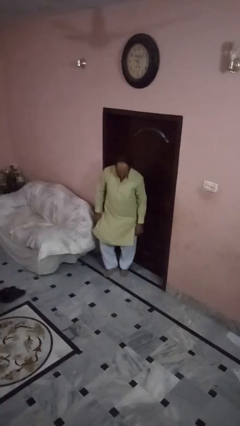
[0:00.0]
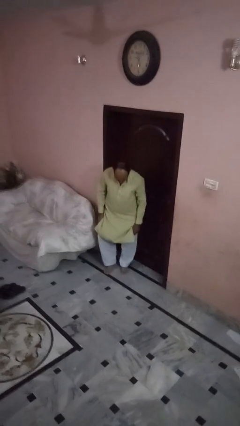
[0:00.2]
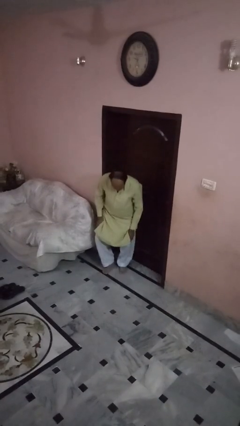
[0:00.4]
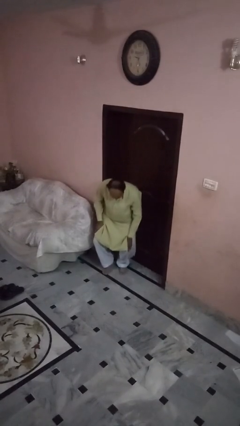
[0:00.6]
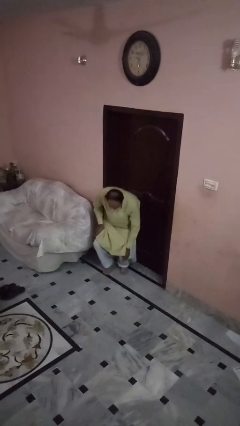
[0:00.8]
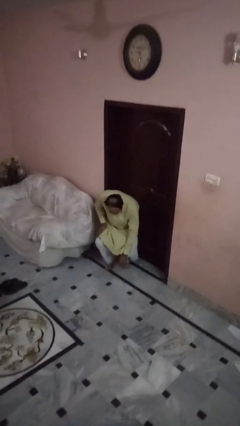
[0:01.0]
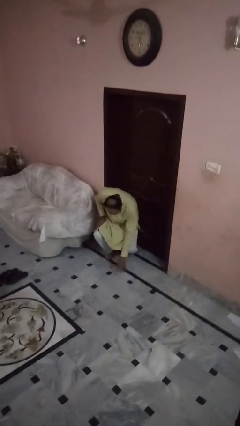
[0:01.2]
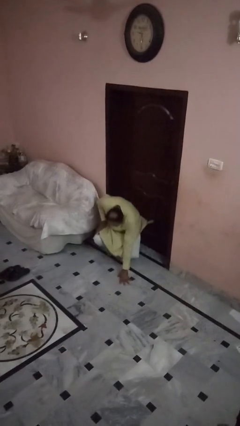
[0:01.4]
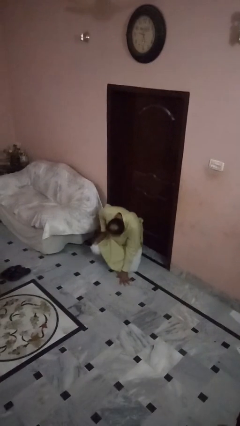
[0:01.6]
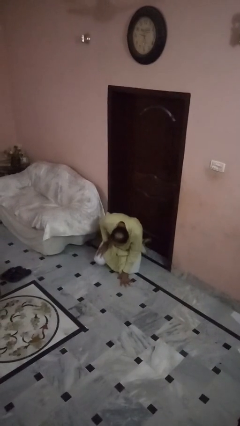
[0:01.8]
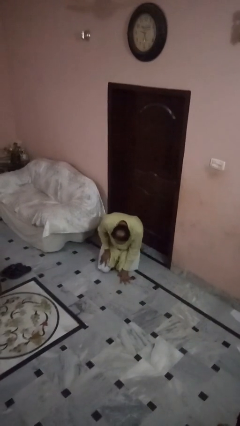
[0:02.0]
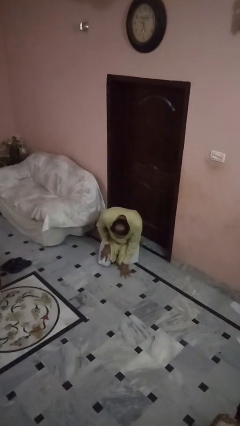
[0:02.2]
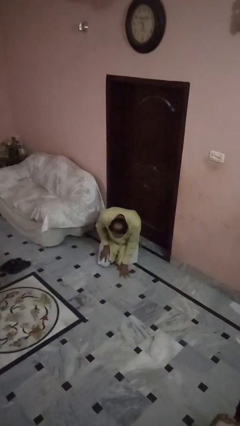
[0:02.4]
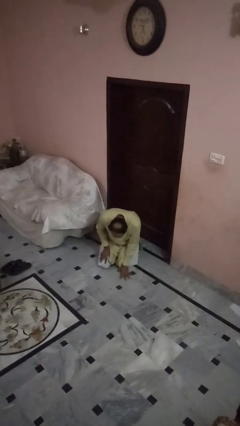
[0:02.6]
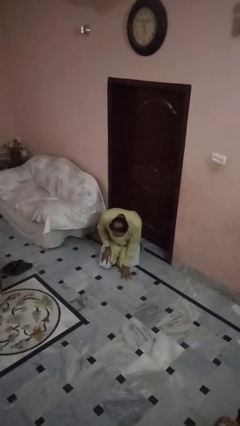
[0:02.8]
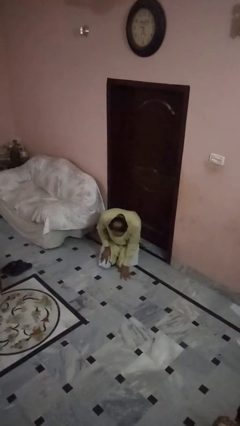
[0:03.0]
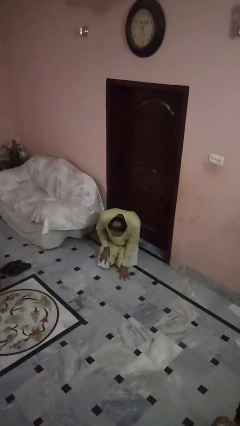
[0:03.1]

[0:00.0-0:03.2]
person falls while standing

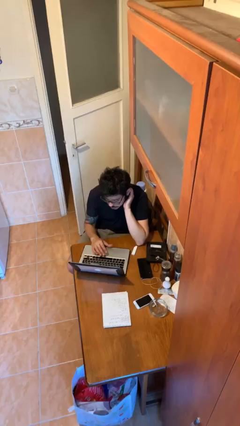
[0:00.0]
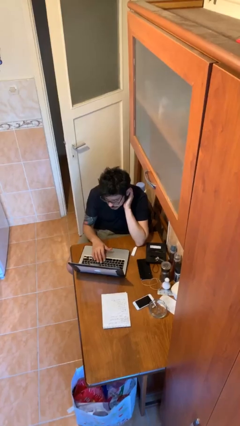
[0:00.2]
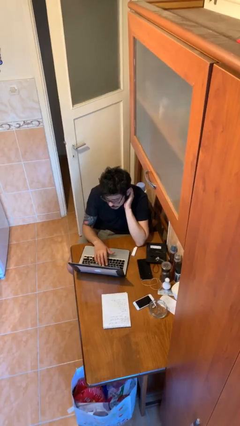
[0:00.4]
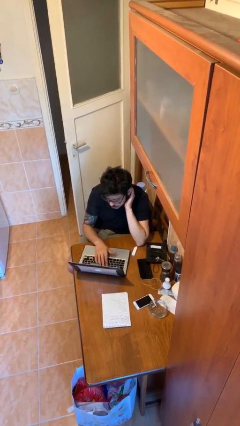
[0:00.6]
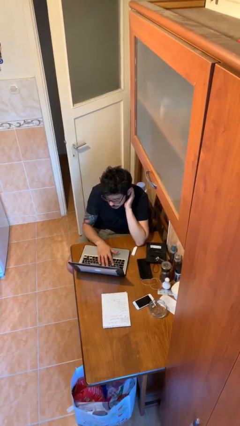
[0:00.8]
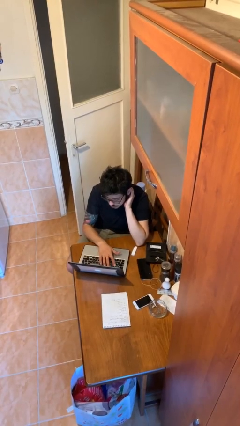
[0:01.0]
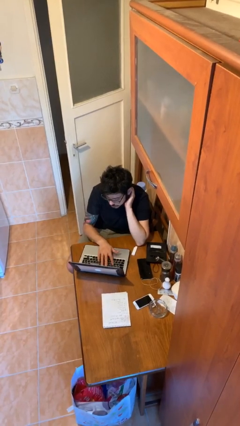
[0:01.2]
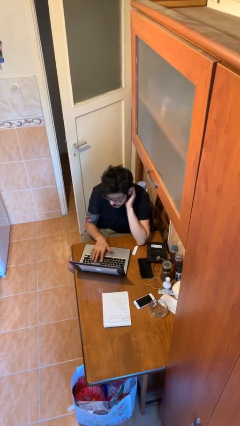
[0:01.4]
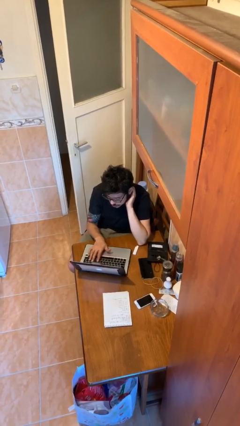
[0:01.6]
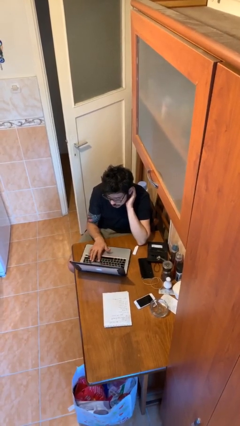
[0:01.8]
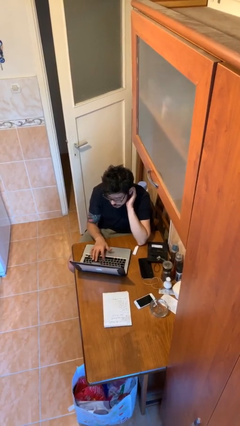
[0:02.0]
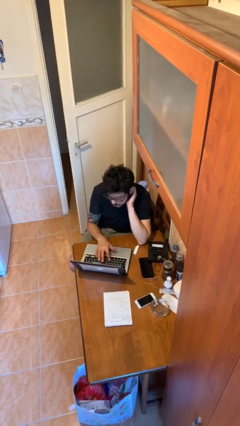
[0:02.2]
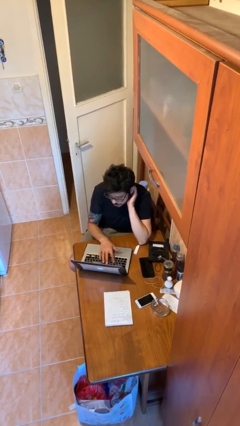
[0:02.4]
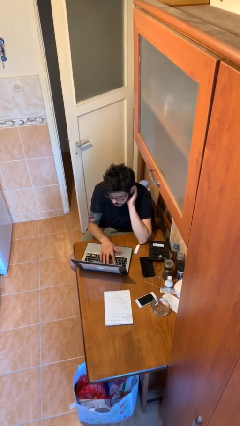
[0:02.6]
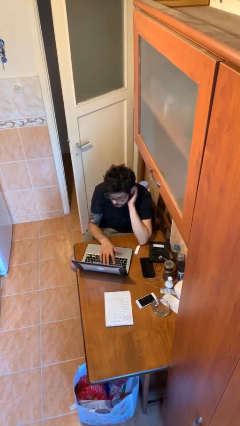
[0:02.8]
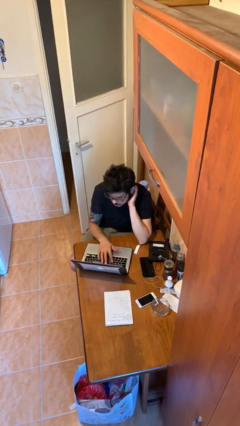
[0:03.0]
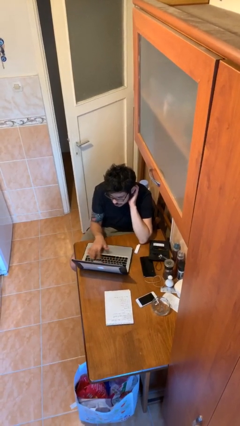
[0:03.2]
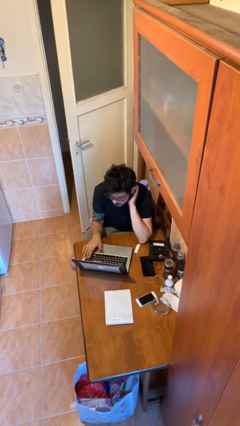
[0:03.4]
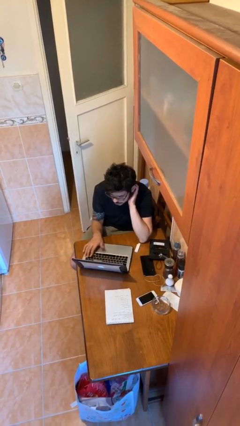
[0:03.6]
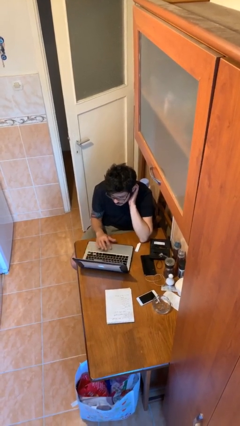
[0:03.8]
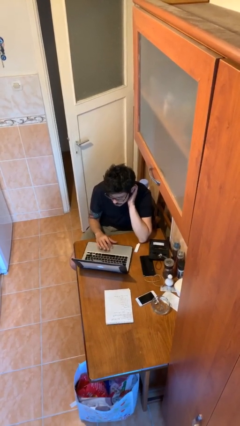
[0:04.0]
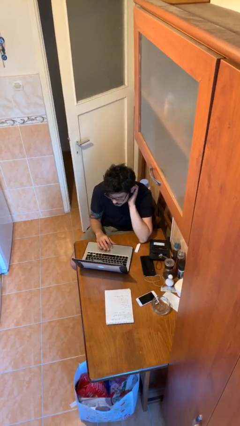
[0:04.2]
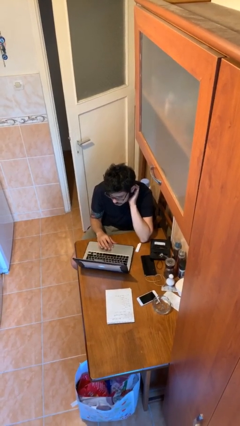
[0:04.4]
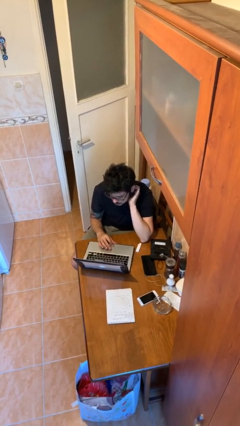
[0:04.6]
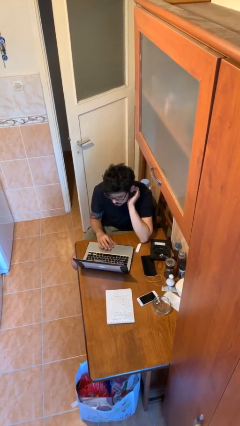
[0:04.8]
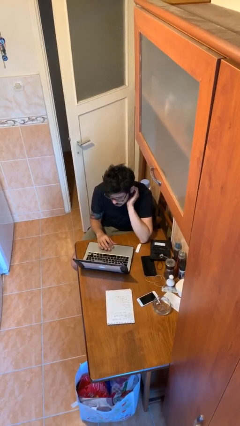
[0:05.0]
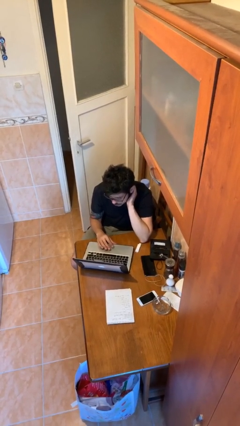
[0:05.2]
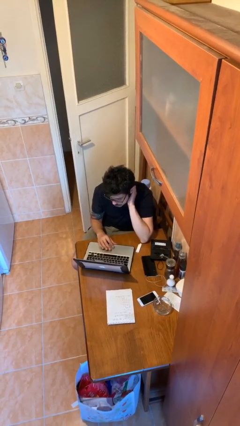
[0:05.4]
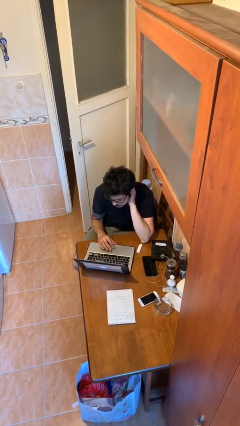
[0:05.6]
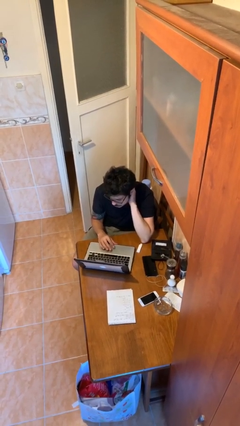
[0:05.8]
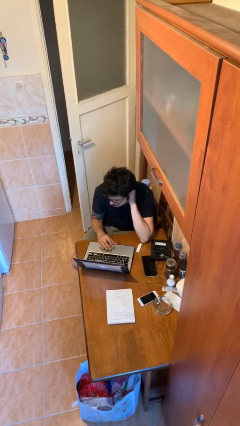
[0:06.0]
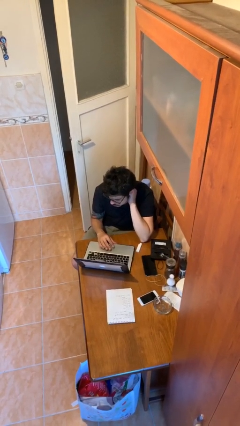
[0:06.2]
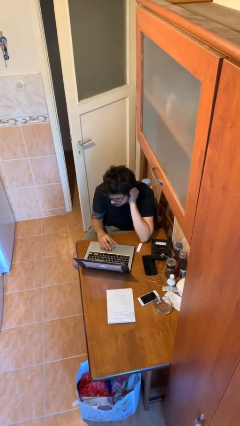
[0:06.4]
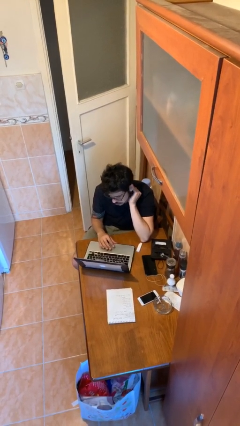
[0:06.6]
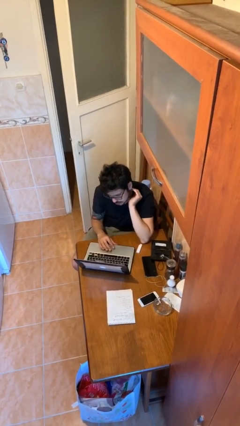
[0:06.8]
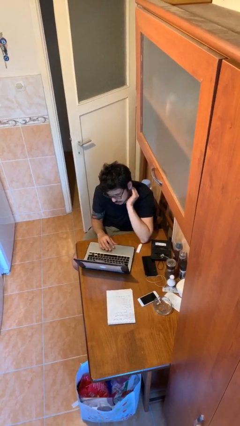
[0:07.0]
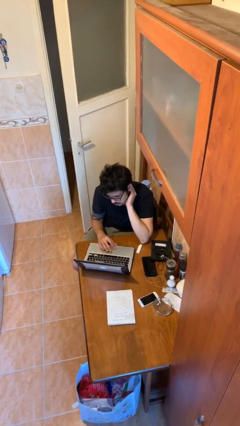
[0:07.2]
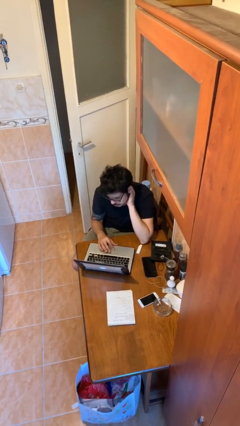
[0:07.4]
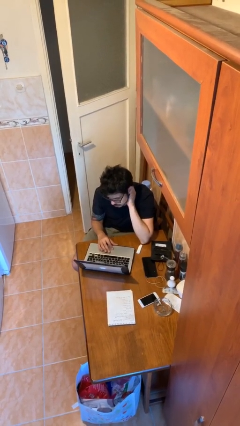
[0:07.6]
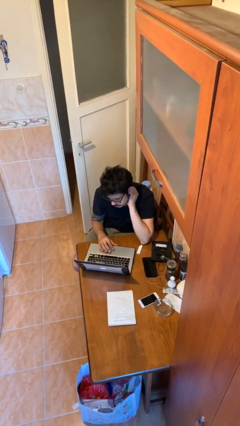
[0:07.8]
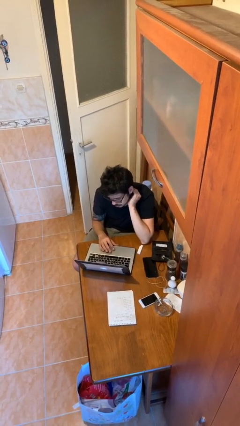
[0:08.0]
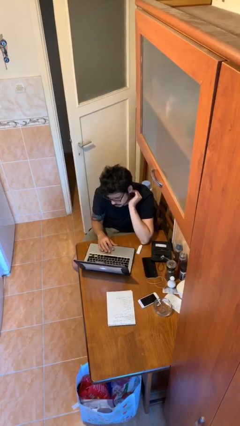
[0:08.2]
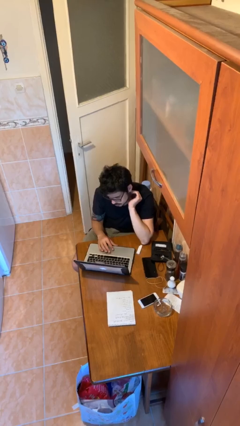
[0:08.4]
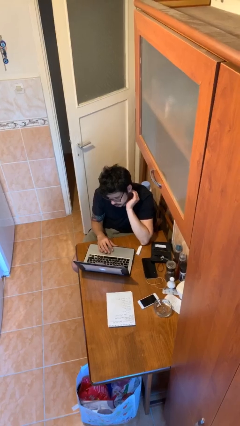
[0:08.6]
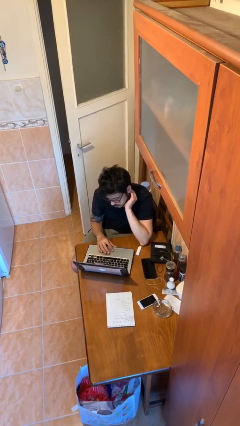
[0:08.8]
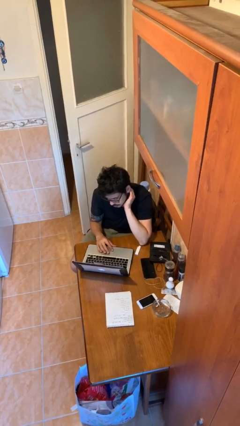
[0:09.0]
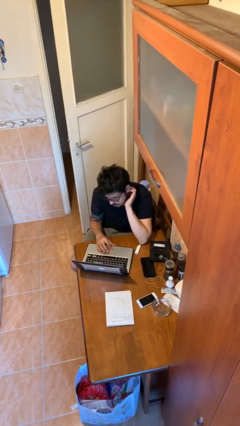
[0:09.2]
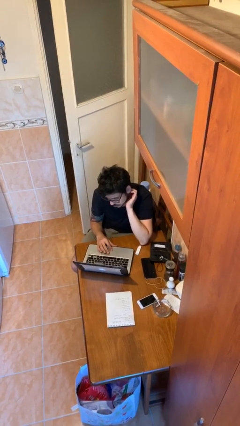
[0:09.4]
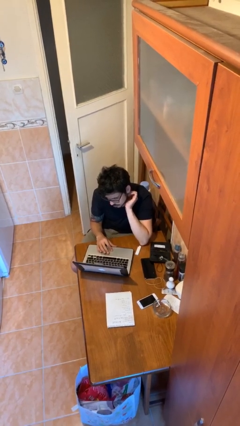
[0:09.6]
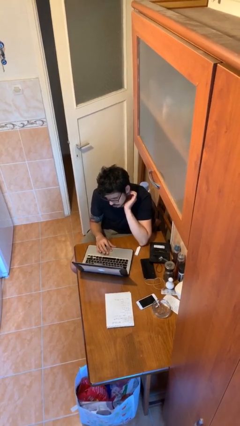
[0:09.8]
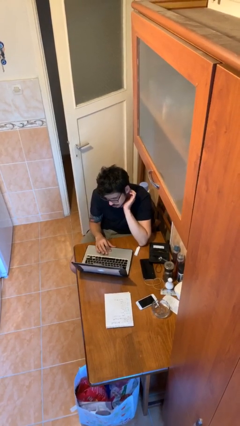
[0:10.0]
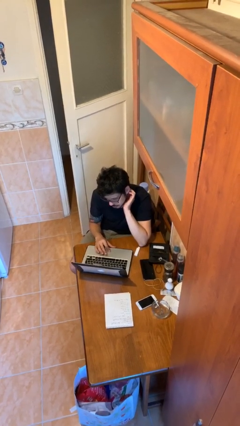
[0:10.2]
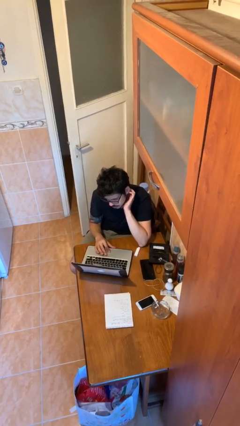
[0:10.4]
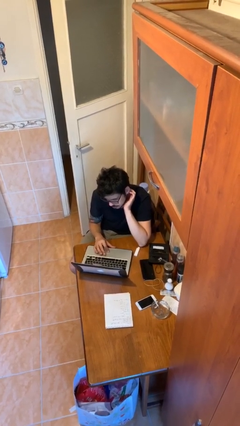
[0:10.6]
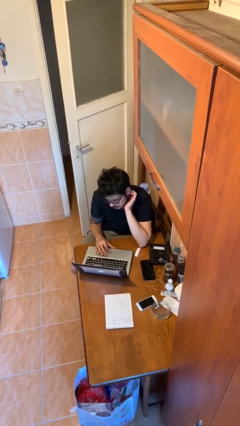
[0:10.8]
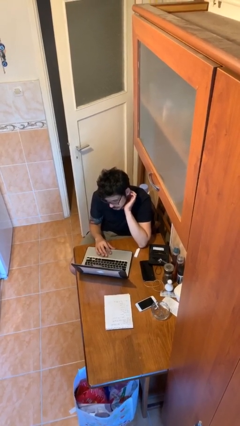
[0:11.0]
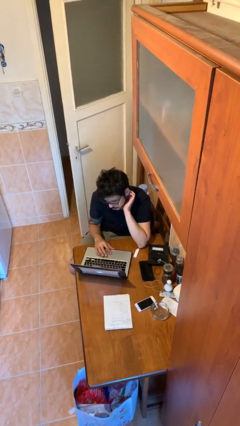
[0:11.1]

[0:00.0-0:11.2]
person interacts with laptop

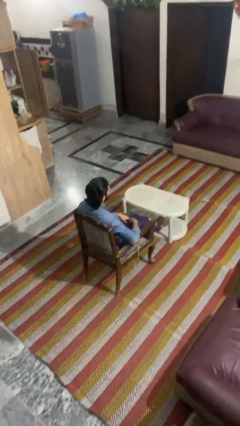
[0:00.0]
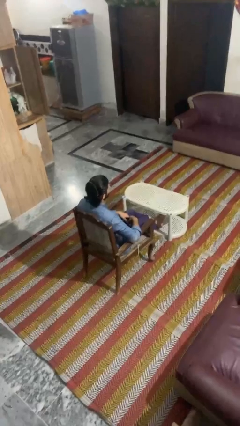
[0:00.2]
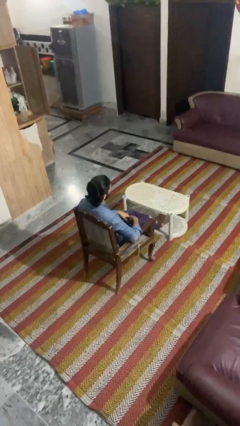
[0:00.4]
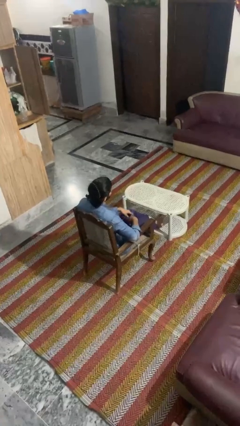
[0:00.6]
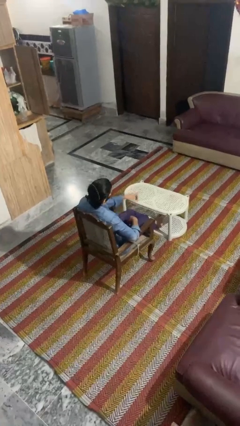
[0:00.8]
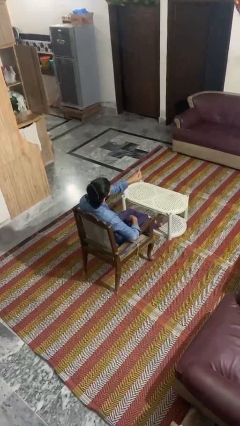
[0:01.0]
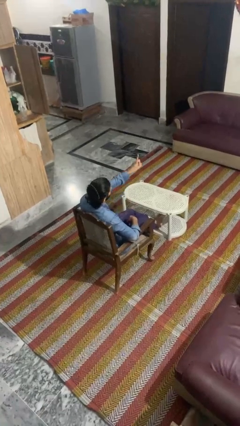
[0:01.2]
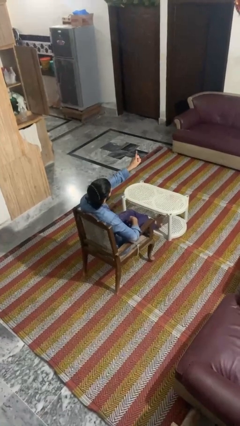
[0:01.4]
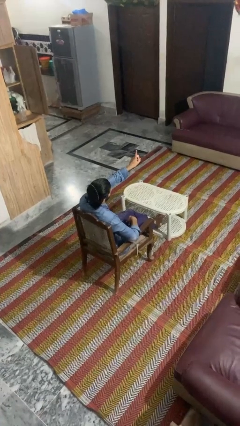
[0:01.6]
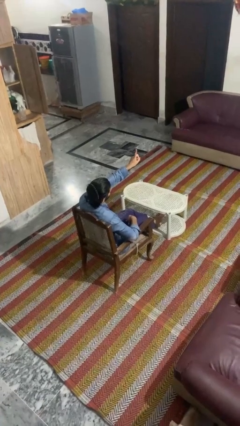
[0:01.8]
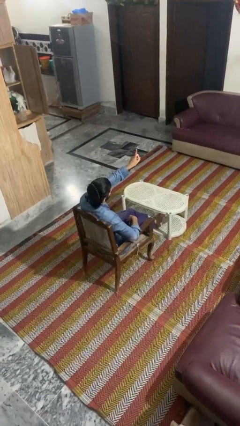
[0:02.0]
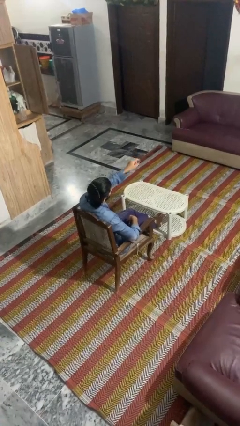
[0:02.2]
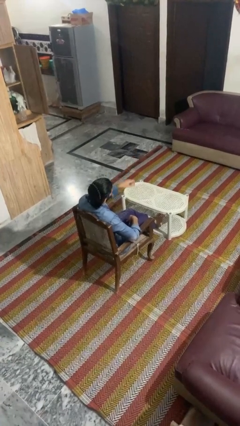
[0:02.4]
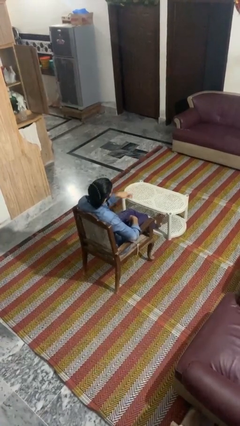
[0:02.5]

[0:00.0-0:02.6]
person gestures number one

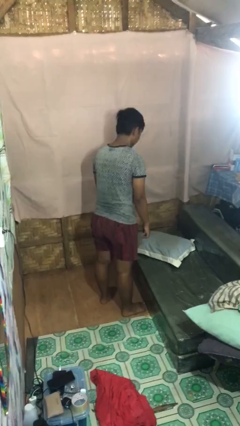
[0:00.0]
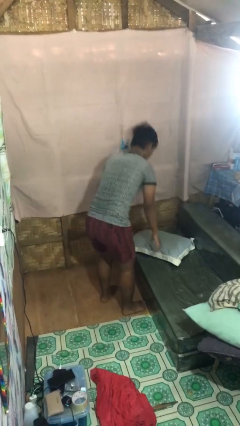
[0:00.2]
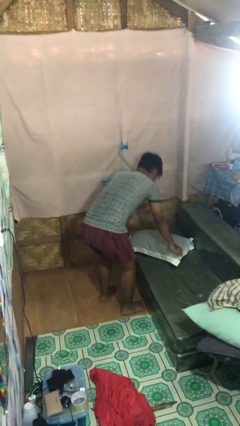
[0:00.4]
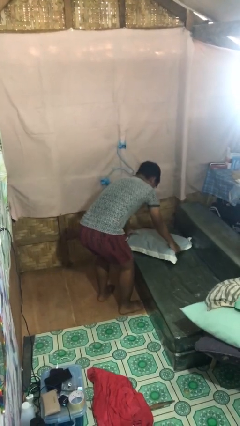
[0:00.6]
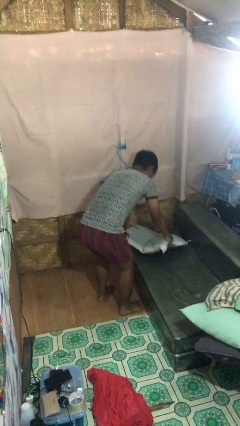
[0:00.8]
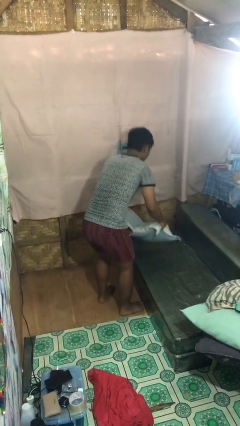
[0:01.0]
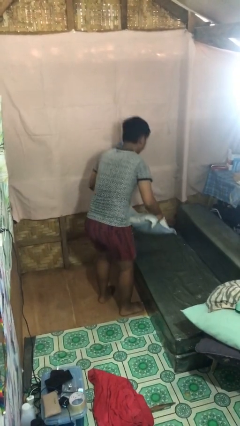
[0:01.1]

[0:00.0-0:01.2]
person picks up object from couch
